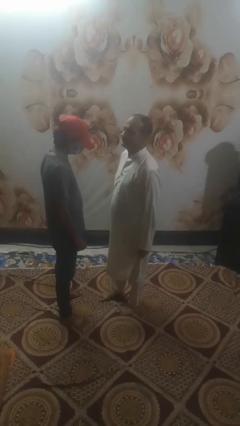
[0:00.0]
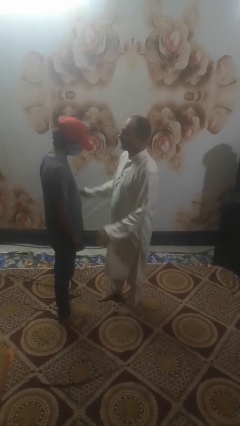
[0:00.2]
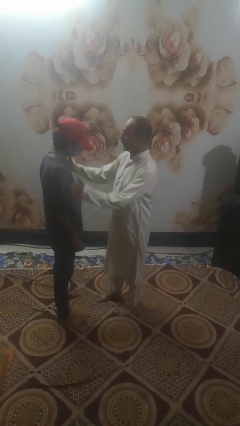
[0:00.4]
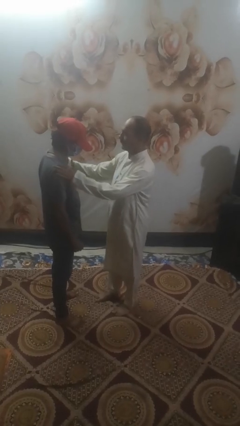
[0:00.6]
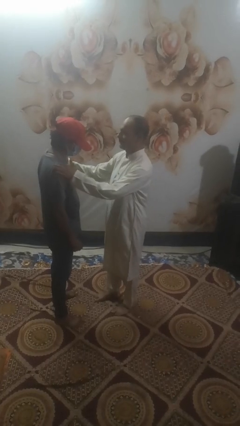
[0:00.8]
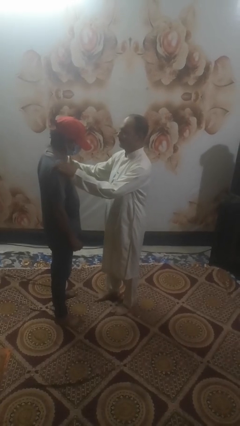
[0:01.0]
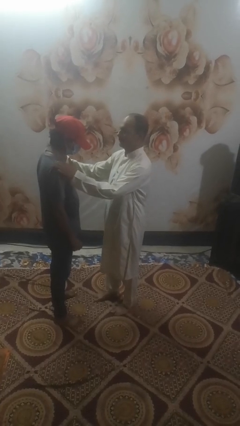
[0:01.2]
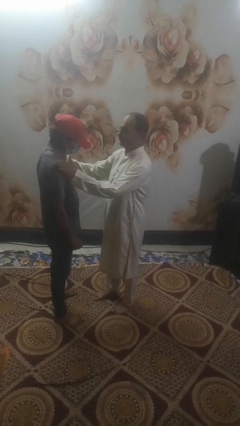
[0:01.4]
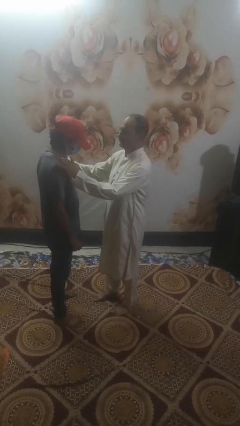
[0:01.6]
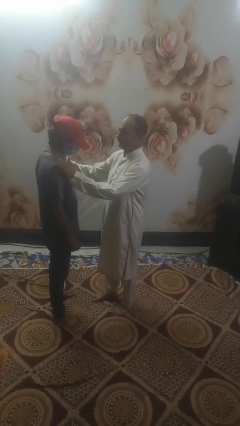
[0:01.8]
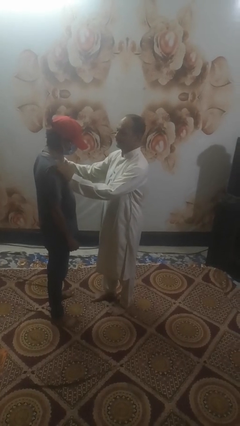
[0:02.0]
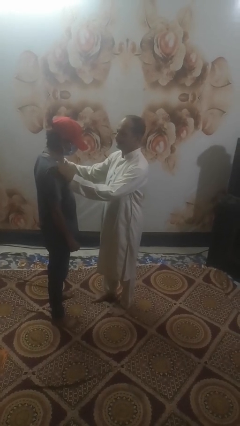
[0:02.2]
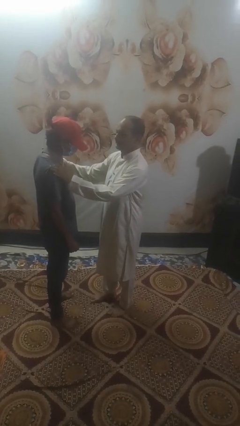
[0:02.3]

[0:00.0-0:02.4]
person pounds shoulders of person

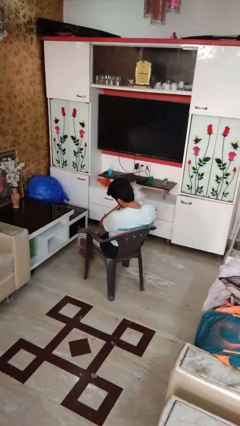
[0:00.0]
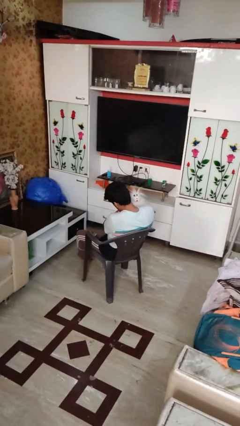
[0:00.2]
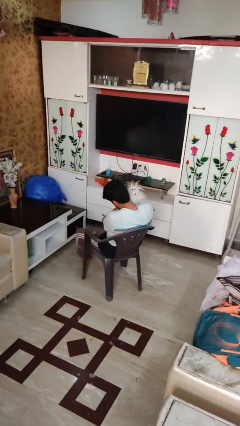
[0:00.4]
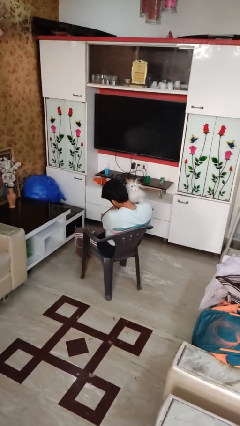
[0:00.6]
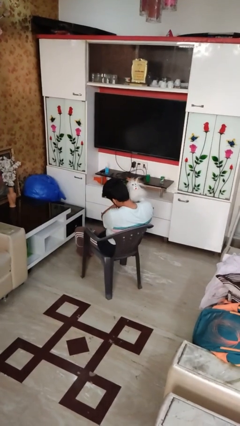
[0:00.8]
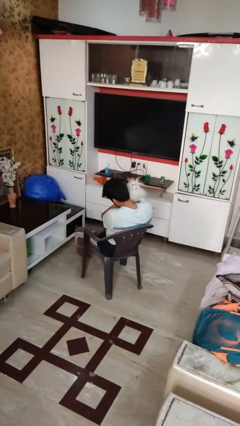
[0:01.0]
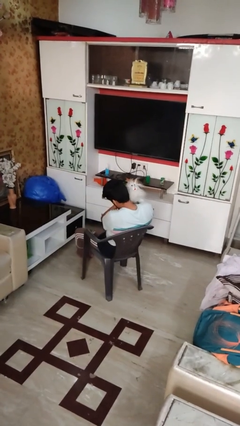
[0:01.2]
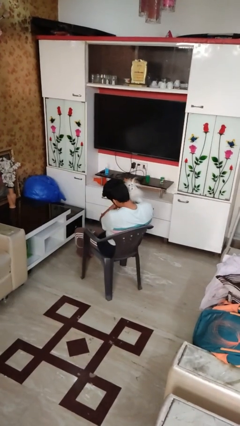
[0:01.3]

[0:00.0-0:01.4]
person hugs stuffed animal

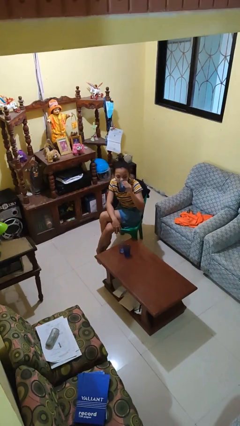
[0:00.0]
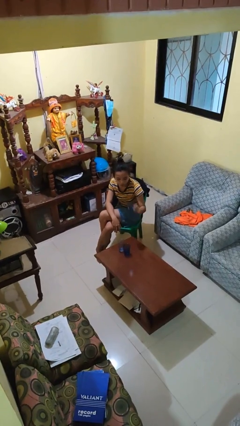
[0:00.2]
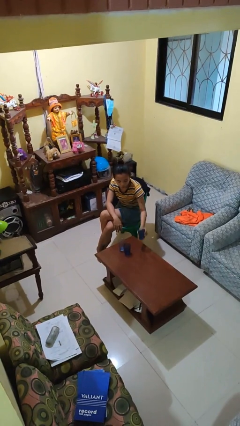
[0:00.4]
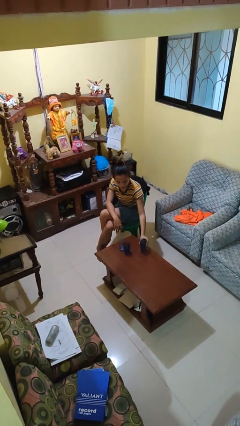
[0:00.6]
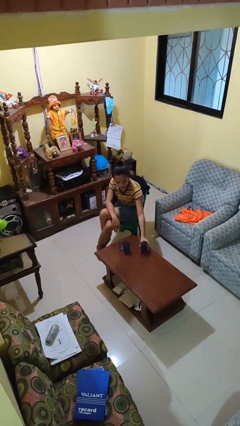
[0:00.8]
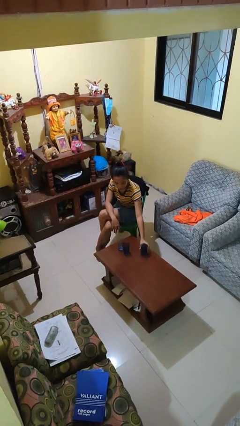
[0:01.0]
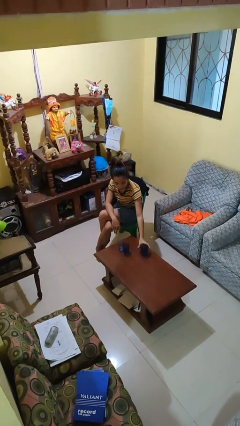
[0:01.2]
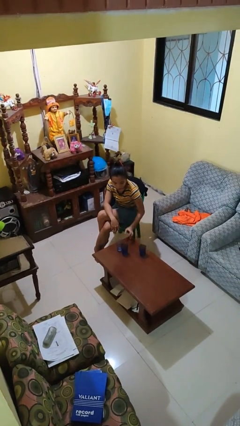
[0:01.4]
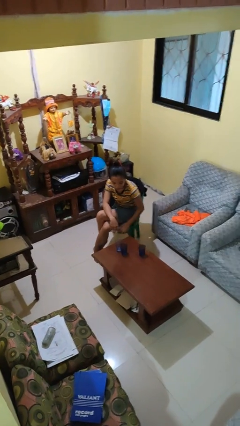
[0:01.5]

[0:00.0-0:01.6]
person puts down object on table

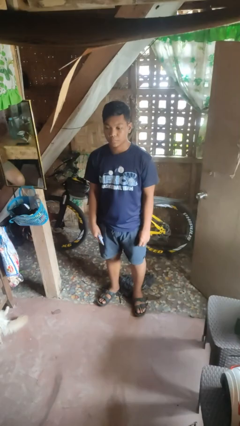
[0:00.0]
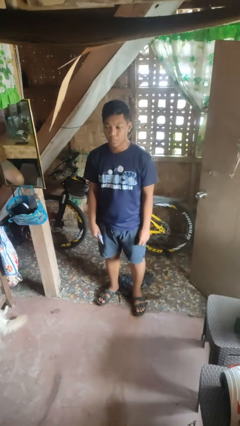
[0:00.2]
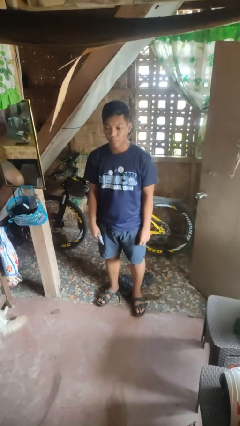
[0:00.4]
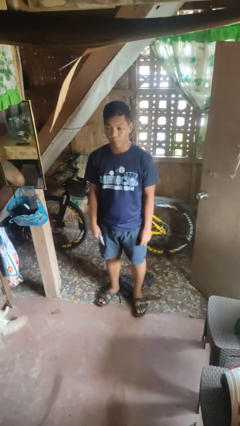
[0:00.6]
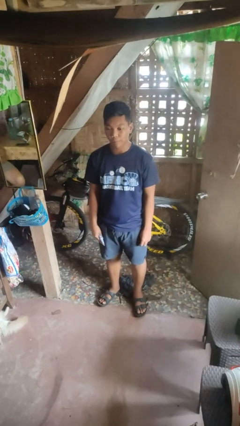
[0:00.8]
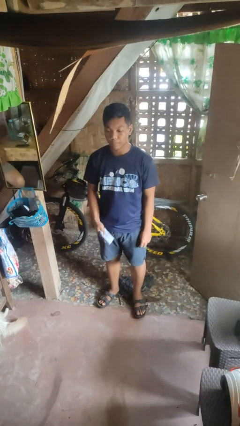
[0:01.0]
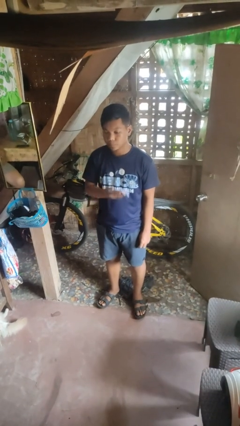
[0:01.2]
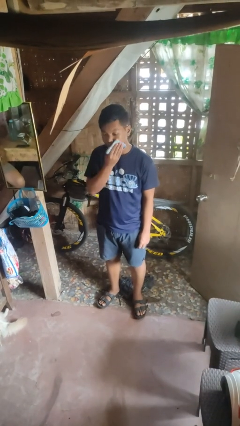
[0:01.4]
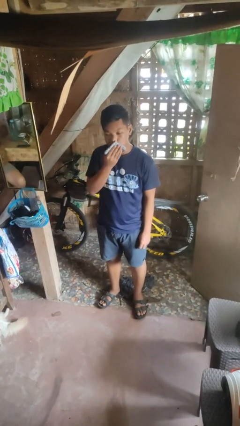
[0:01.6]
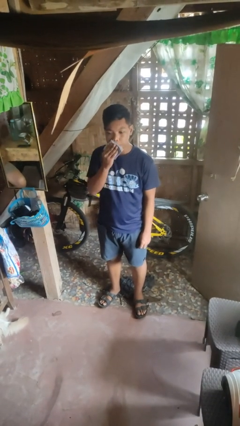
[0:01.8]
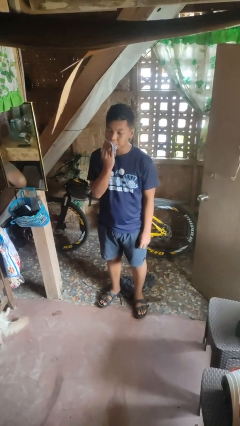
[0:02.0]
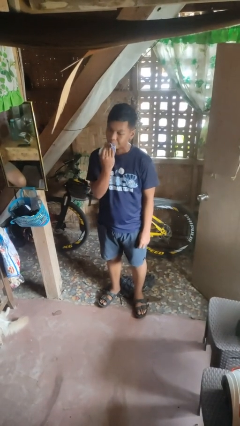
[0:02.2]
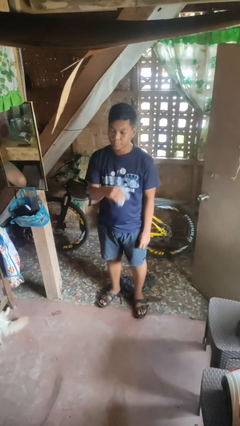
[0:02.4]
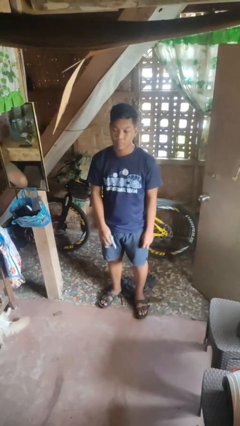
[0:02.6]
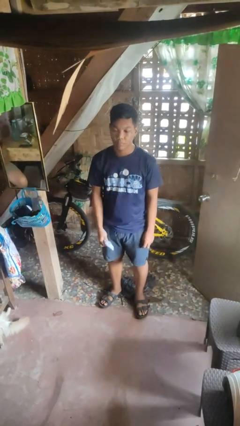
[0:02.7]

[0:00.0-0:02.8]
person wipes mouth with napkin

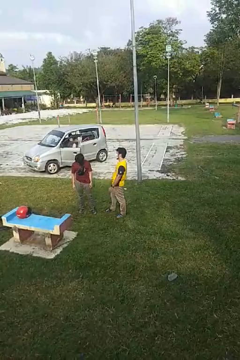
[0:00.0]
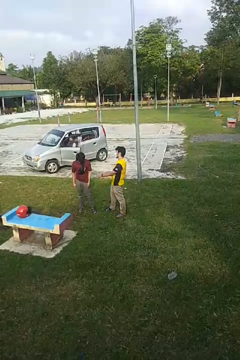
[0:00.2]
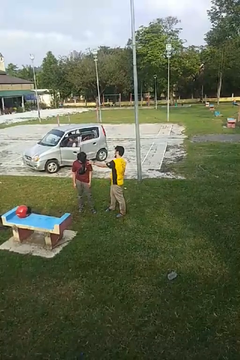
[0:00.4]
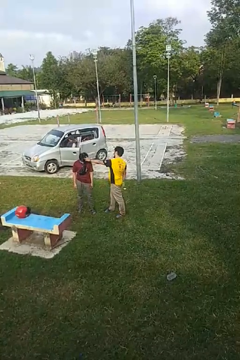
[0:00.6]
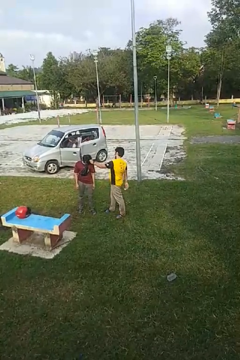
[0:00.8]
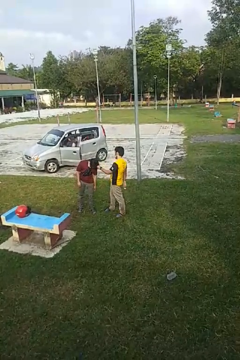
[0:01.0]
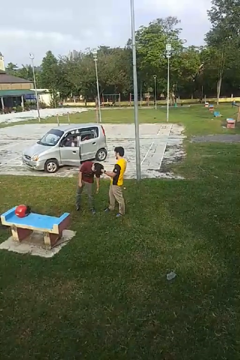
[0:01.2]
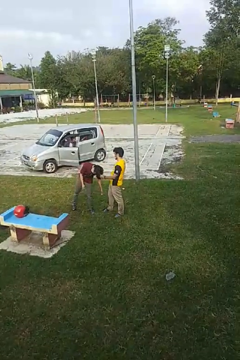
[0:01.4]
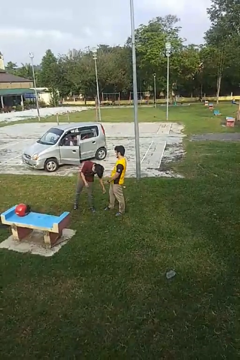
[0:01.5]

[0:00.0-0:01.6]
person grabs person by hair

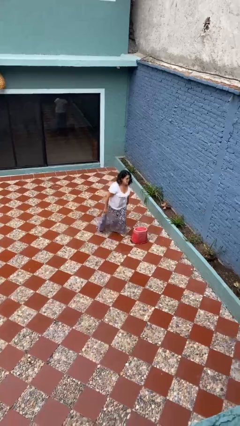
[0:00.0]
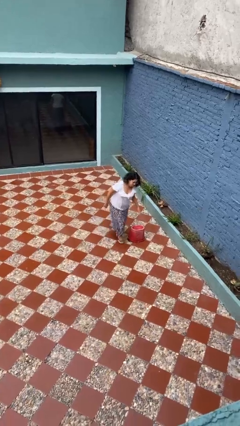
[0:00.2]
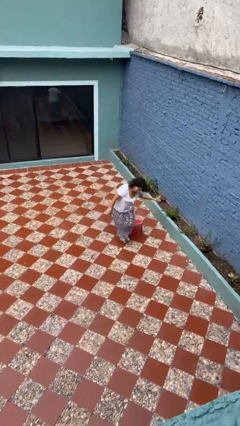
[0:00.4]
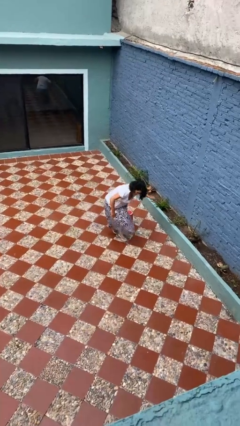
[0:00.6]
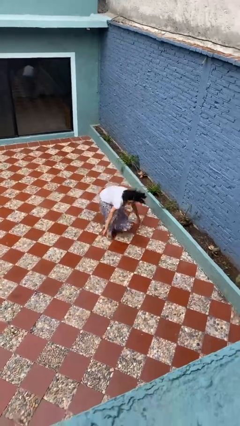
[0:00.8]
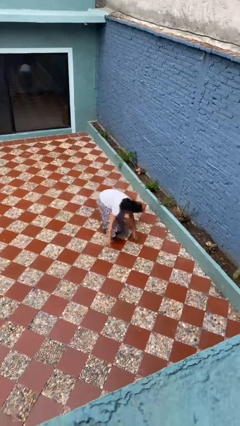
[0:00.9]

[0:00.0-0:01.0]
person trips on object on floor

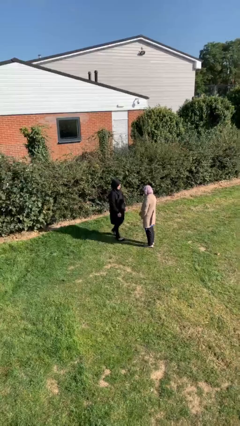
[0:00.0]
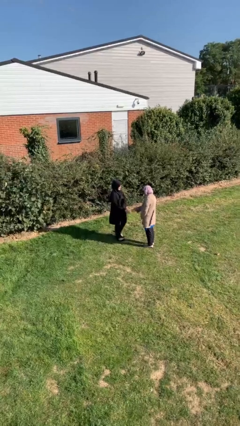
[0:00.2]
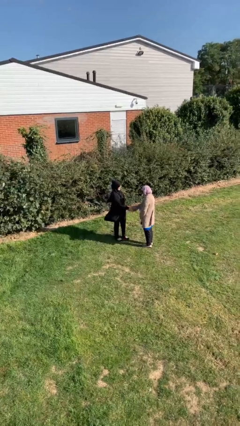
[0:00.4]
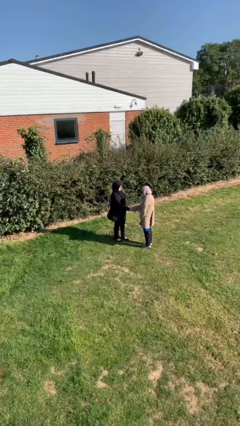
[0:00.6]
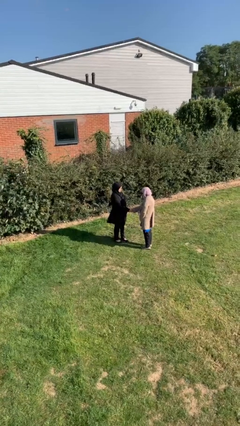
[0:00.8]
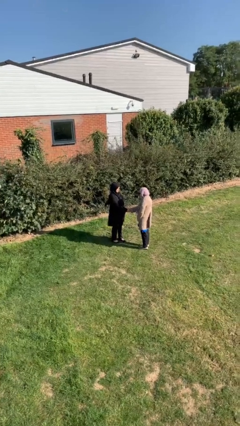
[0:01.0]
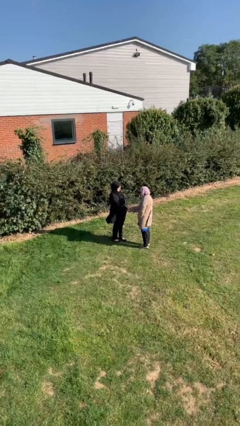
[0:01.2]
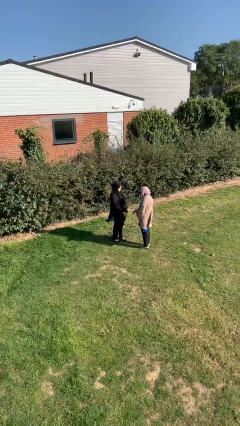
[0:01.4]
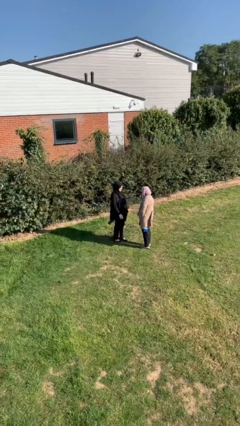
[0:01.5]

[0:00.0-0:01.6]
person shakes hand

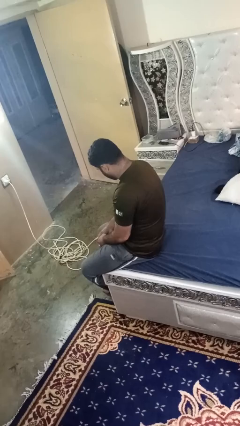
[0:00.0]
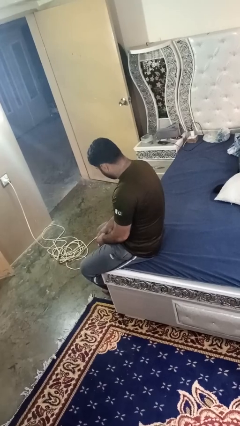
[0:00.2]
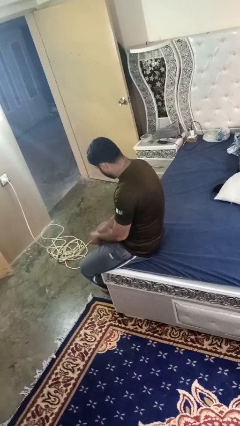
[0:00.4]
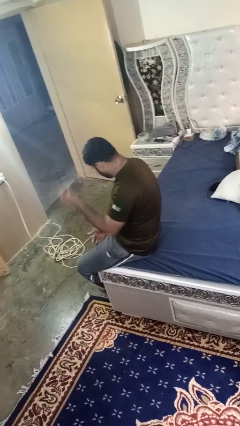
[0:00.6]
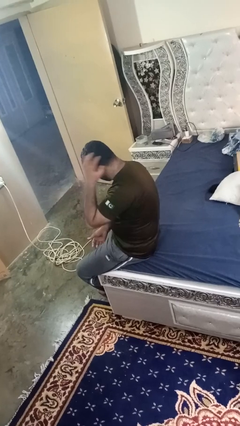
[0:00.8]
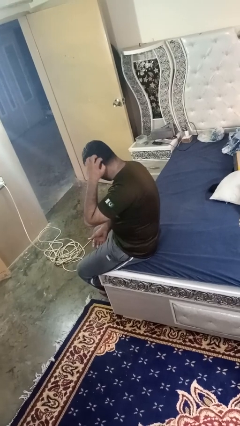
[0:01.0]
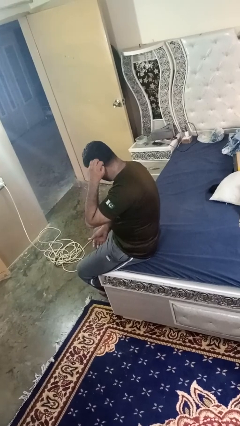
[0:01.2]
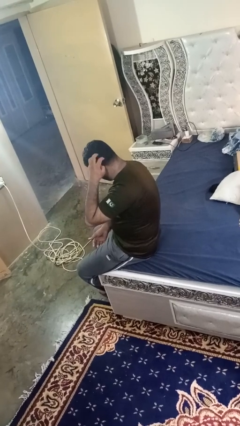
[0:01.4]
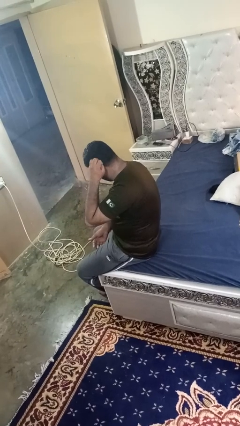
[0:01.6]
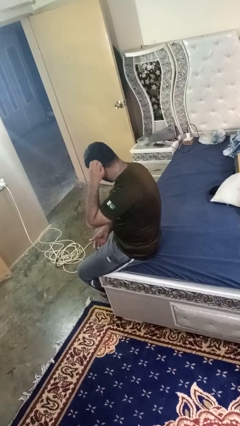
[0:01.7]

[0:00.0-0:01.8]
person strokes hair

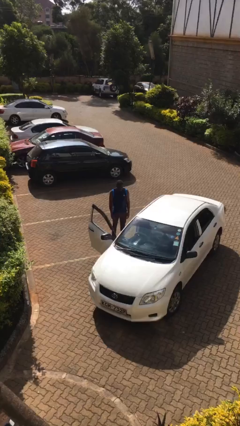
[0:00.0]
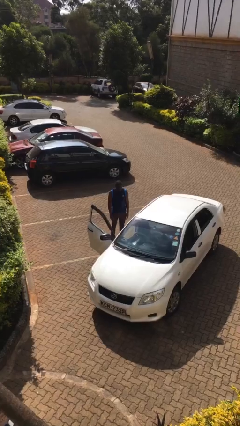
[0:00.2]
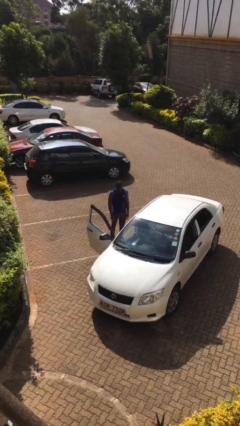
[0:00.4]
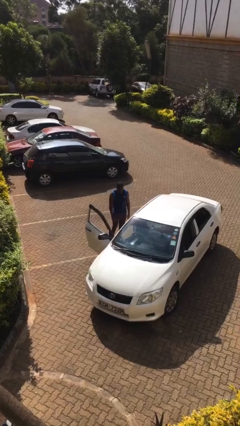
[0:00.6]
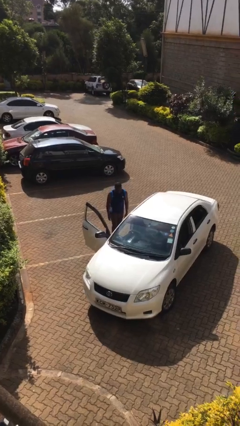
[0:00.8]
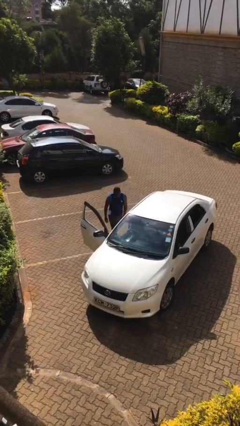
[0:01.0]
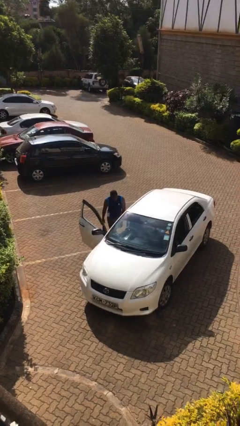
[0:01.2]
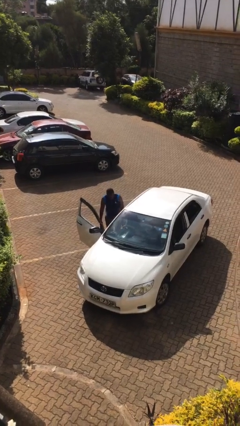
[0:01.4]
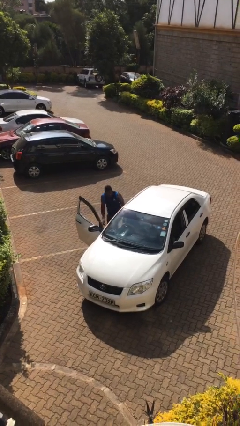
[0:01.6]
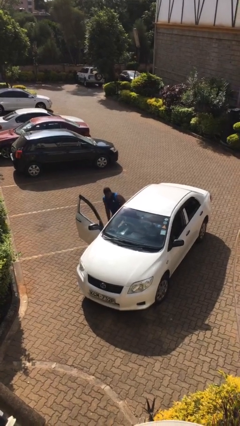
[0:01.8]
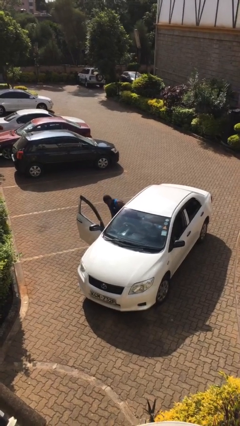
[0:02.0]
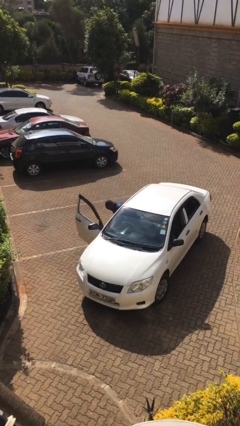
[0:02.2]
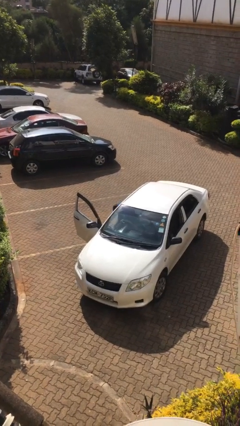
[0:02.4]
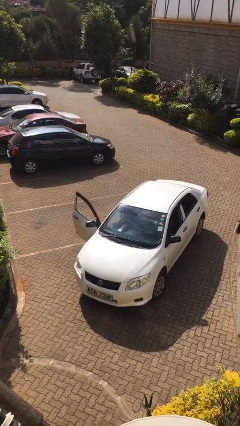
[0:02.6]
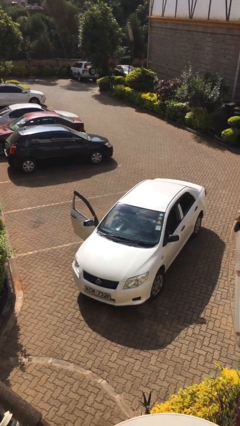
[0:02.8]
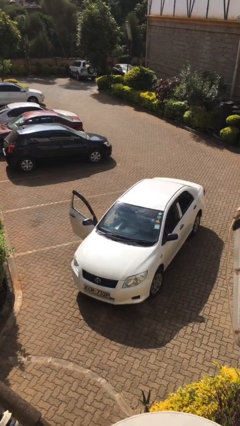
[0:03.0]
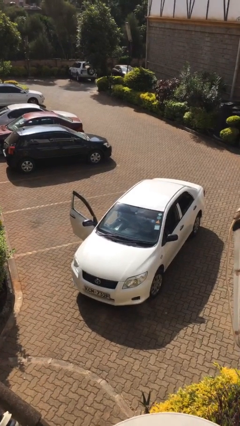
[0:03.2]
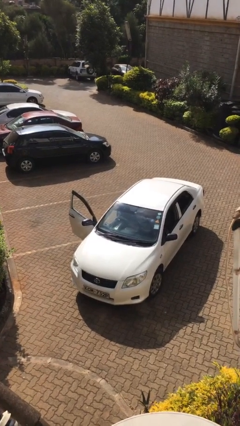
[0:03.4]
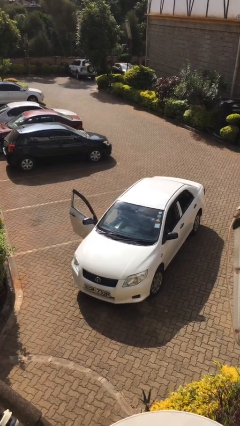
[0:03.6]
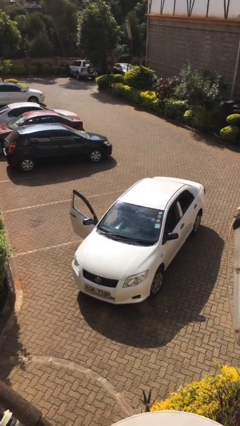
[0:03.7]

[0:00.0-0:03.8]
person enters car
